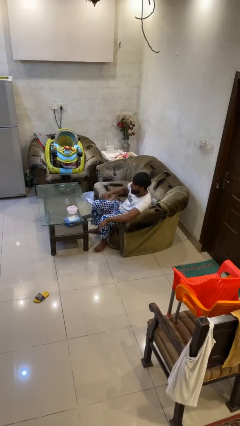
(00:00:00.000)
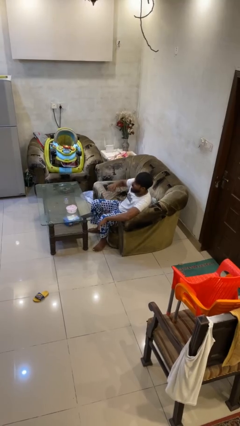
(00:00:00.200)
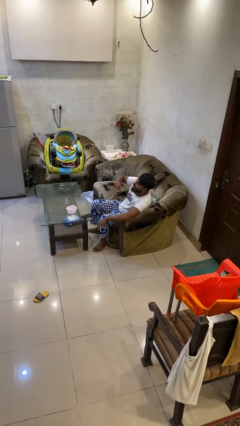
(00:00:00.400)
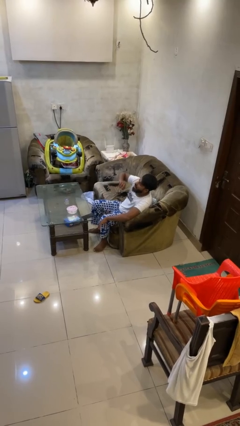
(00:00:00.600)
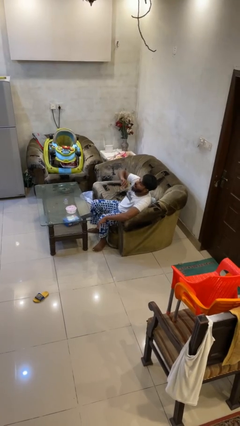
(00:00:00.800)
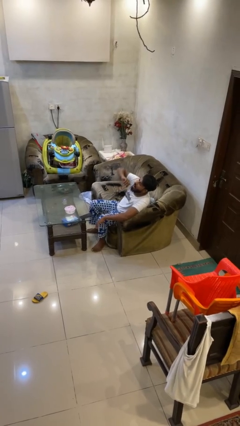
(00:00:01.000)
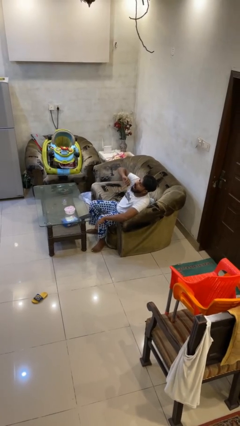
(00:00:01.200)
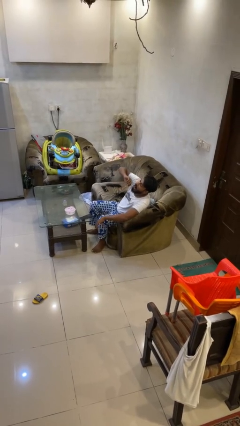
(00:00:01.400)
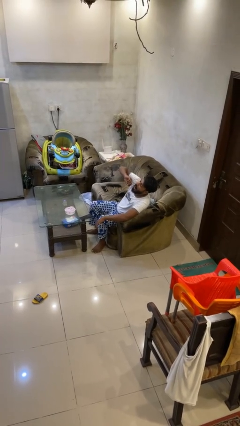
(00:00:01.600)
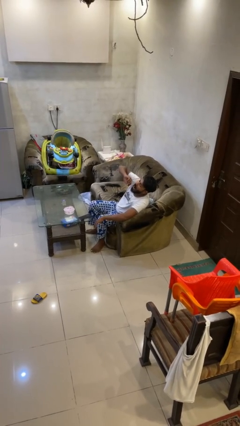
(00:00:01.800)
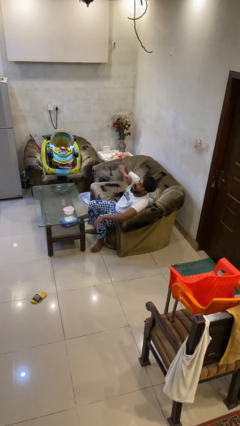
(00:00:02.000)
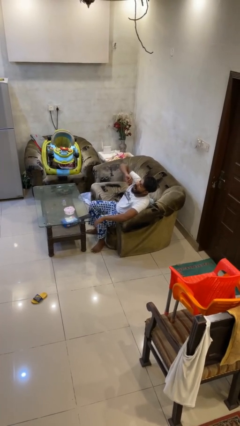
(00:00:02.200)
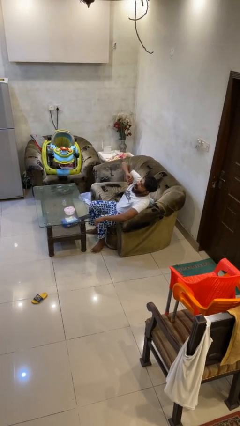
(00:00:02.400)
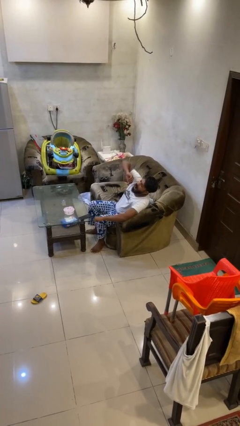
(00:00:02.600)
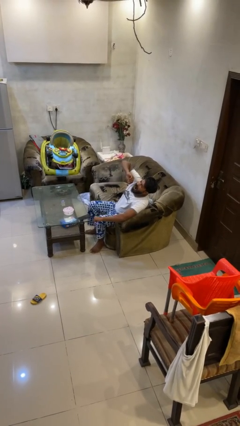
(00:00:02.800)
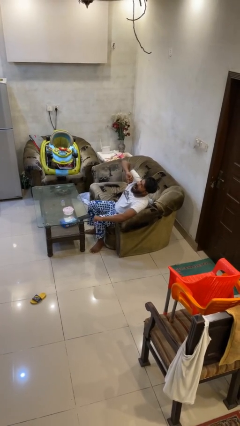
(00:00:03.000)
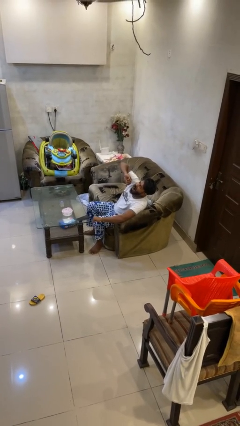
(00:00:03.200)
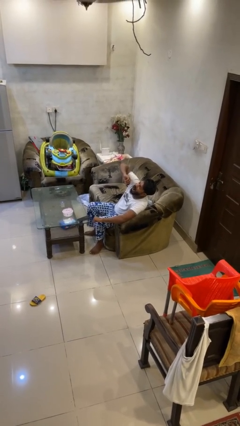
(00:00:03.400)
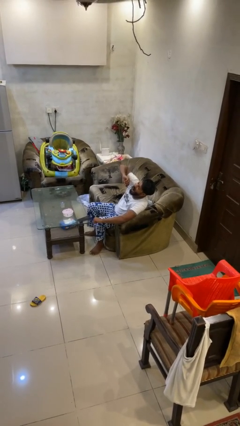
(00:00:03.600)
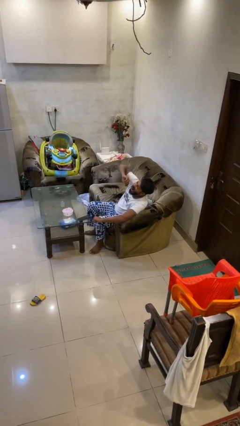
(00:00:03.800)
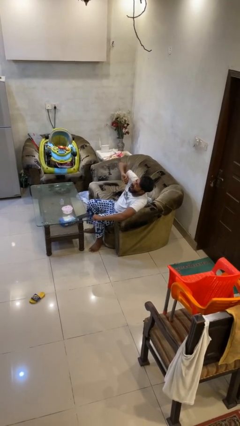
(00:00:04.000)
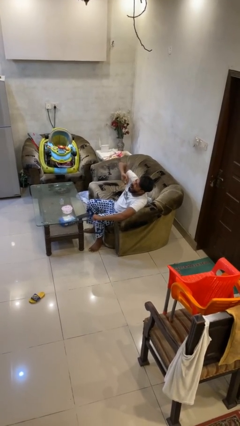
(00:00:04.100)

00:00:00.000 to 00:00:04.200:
person yawns

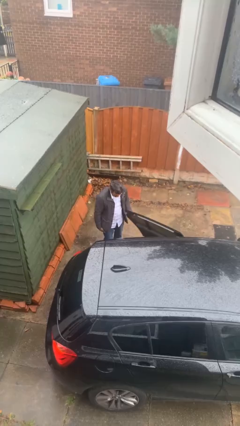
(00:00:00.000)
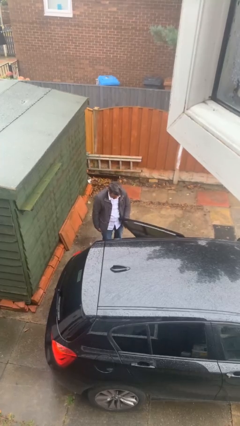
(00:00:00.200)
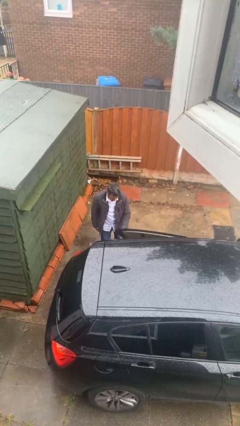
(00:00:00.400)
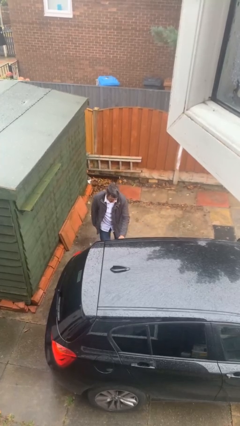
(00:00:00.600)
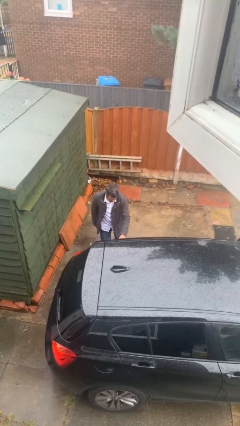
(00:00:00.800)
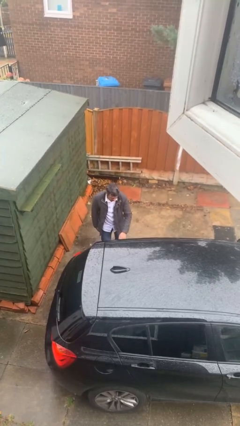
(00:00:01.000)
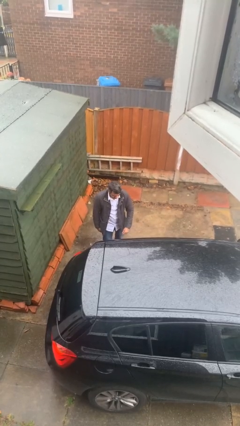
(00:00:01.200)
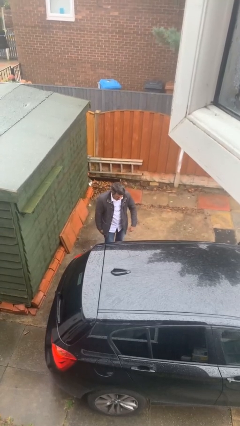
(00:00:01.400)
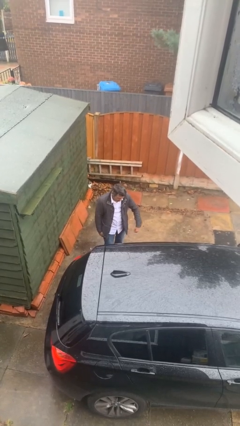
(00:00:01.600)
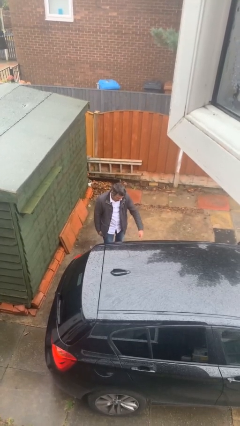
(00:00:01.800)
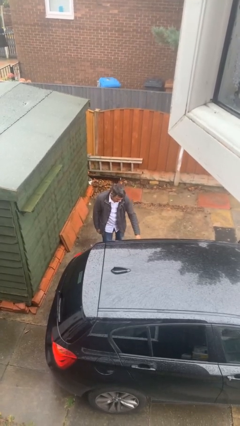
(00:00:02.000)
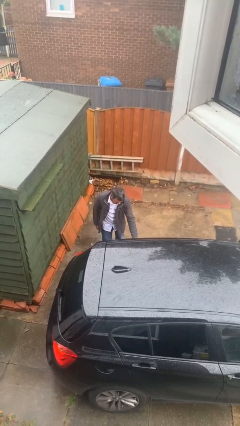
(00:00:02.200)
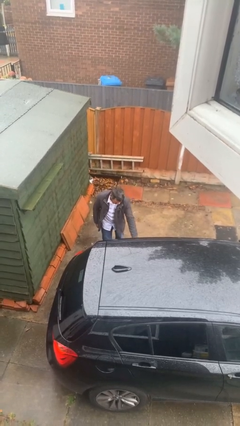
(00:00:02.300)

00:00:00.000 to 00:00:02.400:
person closes car door

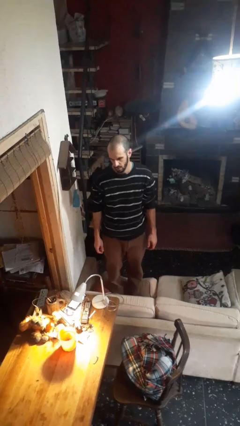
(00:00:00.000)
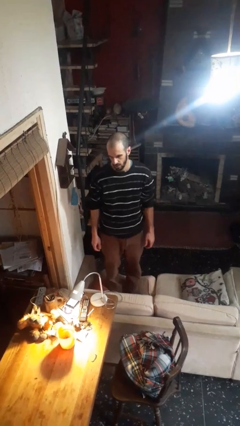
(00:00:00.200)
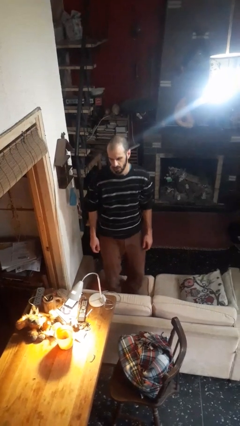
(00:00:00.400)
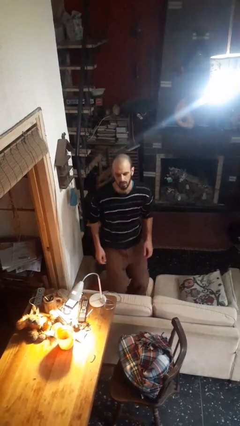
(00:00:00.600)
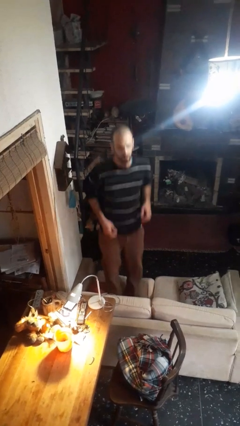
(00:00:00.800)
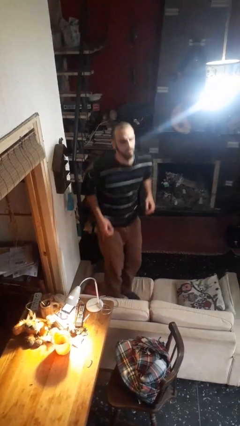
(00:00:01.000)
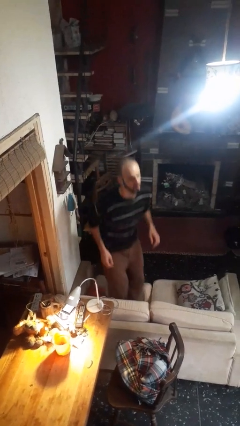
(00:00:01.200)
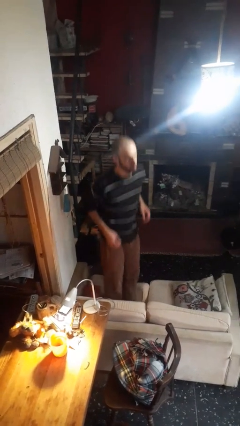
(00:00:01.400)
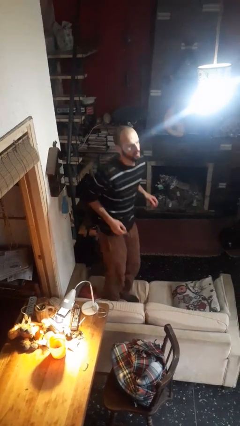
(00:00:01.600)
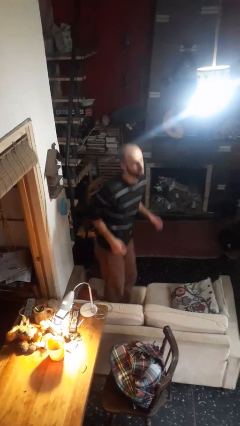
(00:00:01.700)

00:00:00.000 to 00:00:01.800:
person jumps on couch

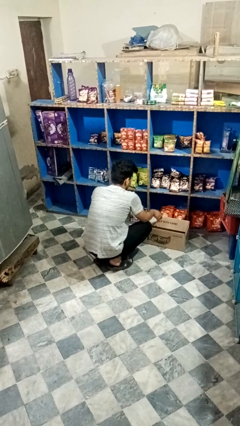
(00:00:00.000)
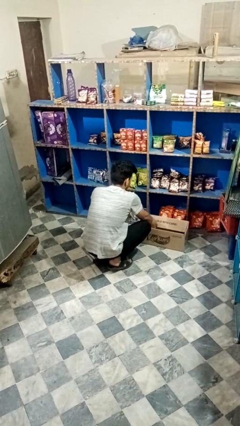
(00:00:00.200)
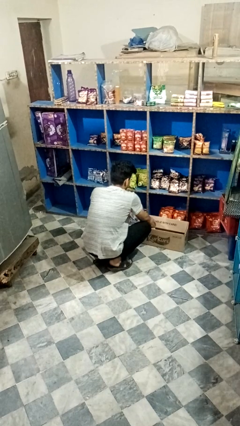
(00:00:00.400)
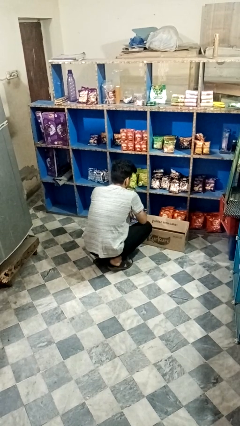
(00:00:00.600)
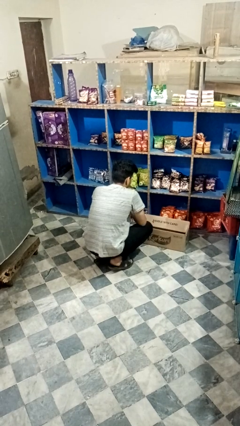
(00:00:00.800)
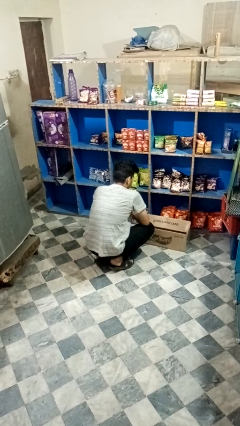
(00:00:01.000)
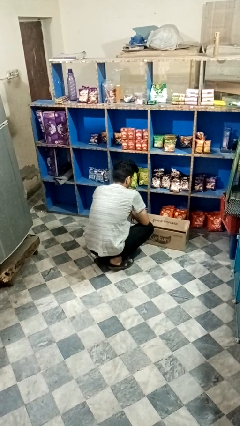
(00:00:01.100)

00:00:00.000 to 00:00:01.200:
person puts object into box

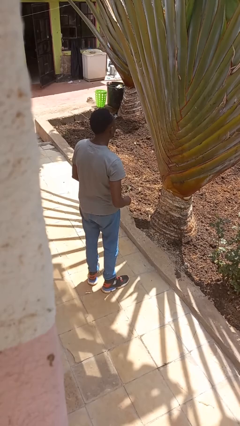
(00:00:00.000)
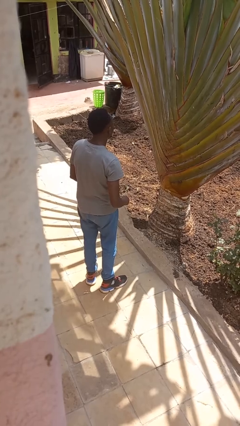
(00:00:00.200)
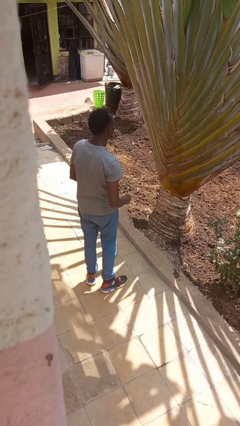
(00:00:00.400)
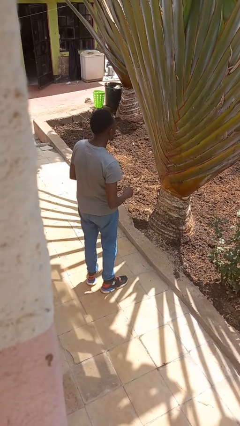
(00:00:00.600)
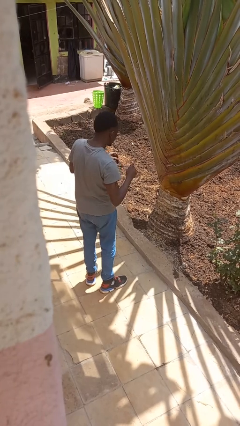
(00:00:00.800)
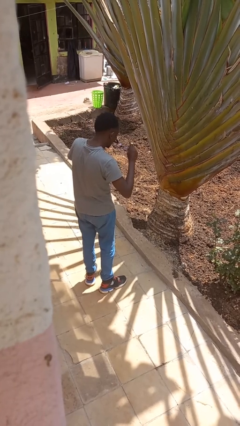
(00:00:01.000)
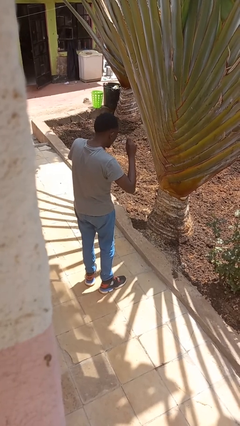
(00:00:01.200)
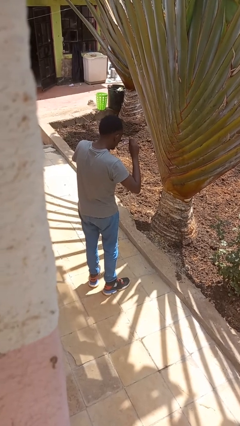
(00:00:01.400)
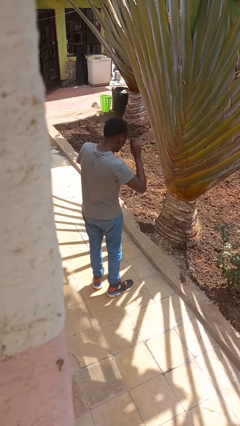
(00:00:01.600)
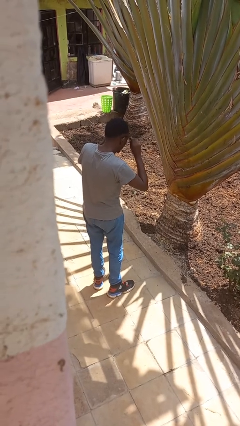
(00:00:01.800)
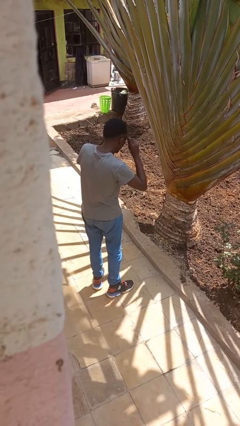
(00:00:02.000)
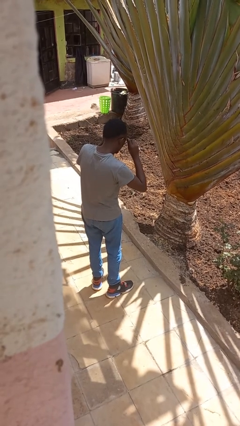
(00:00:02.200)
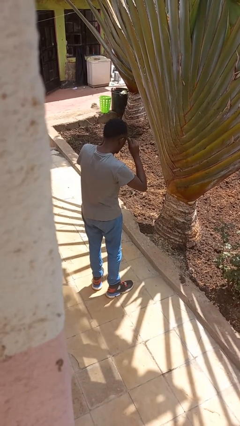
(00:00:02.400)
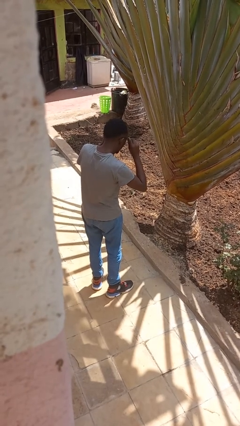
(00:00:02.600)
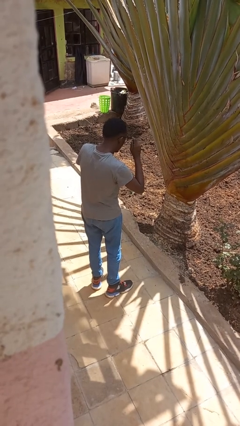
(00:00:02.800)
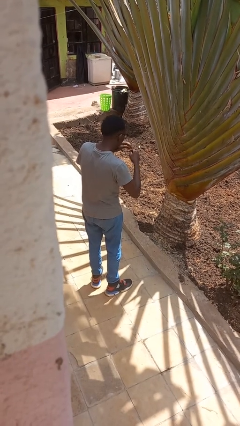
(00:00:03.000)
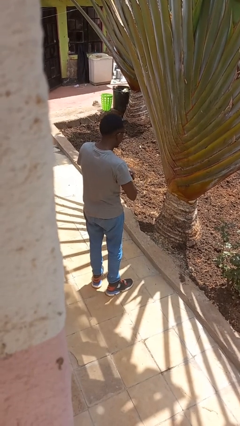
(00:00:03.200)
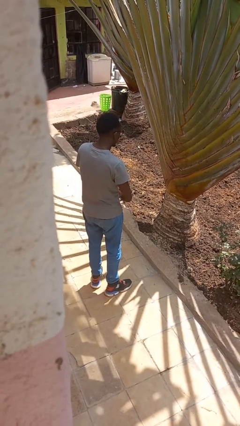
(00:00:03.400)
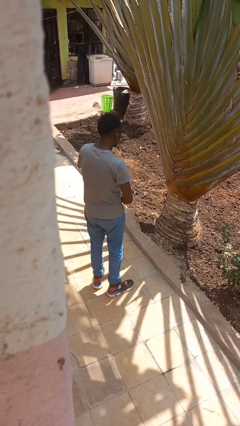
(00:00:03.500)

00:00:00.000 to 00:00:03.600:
person puts on glasses

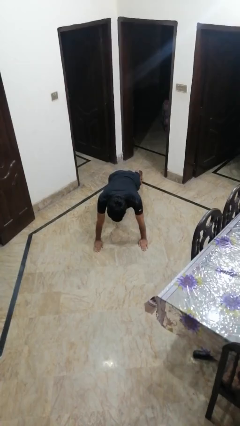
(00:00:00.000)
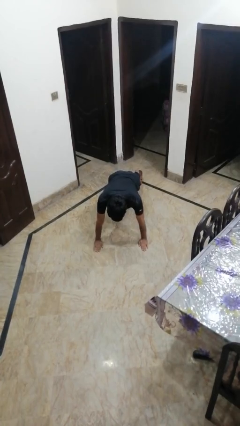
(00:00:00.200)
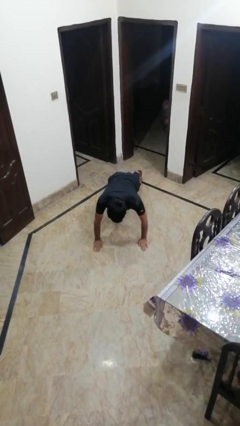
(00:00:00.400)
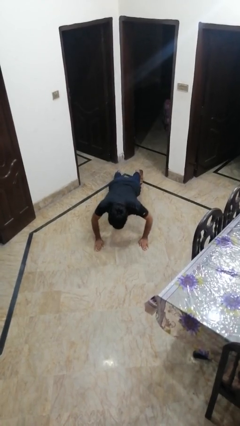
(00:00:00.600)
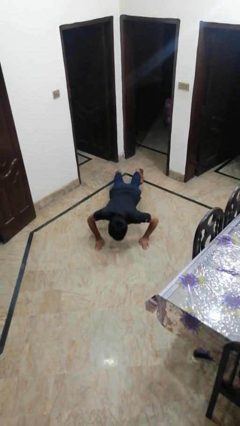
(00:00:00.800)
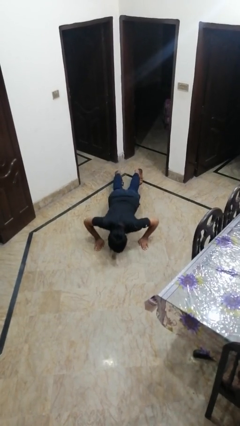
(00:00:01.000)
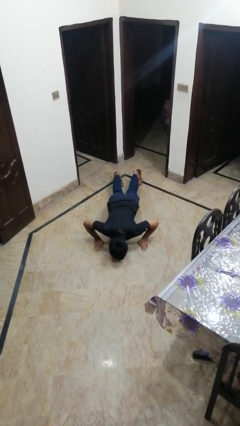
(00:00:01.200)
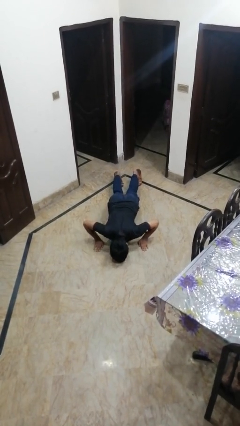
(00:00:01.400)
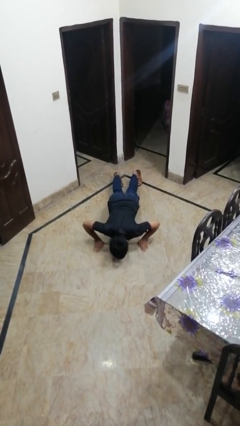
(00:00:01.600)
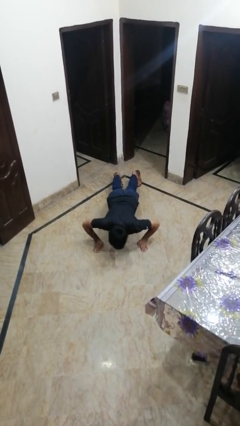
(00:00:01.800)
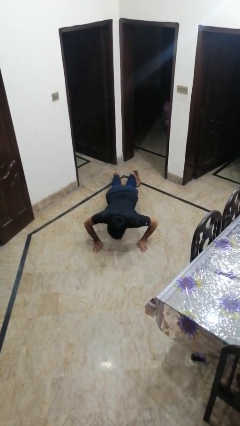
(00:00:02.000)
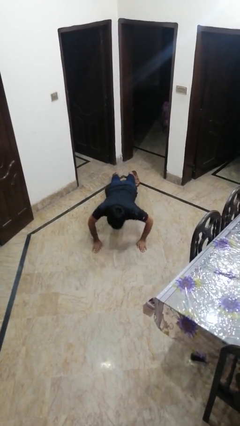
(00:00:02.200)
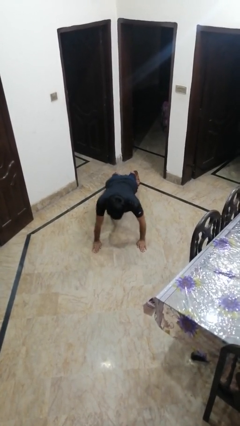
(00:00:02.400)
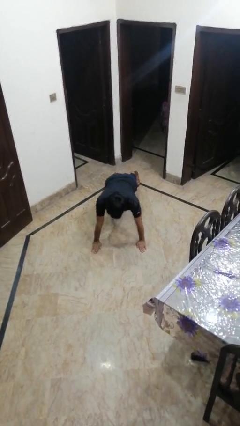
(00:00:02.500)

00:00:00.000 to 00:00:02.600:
person exercises with pushup

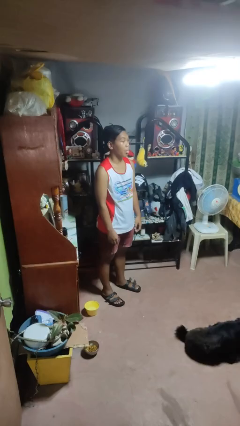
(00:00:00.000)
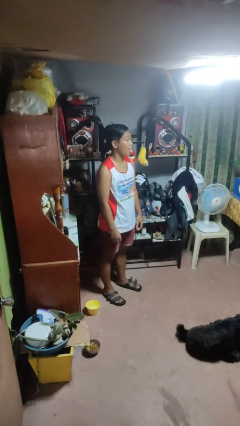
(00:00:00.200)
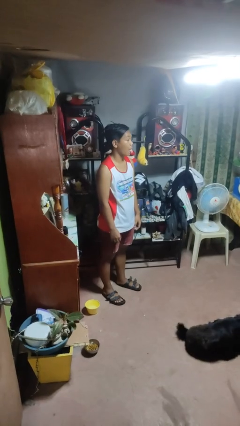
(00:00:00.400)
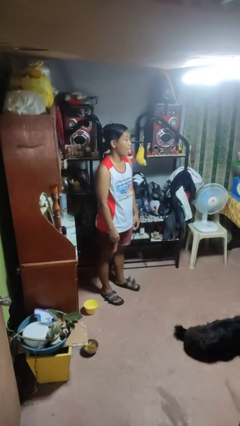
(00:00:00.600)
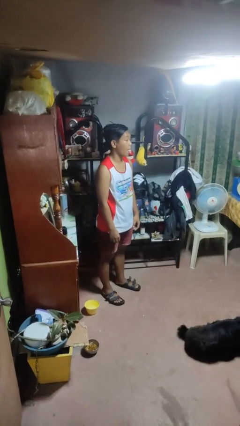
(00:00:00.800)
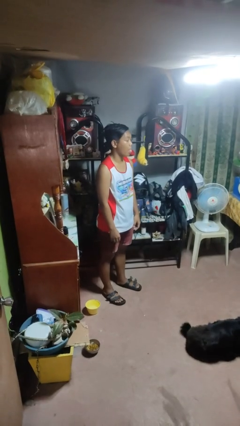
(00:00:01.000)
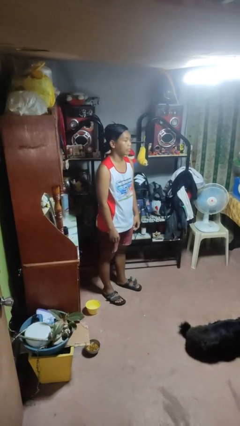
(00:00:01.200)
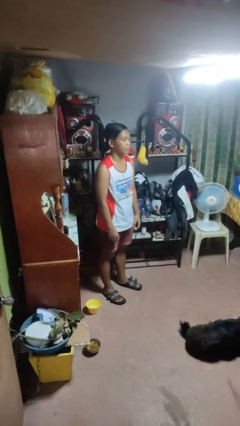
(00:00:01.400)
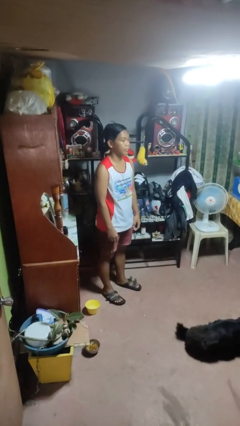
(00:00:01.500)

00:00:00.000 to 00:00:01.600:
person sticks out tongue
